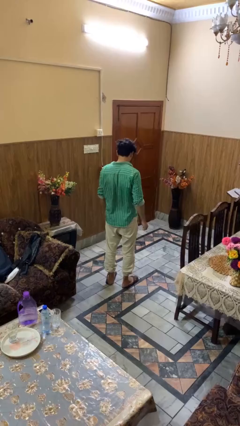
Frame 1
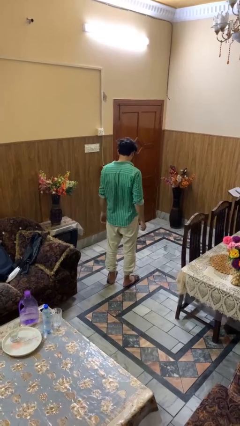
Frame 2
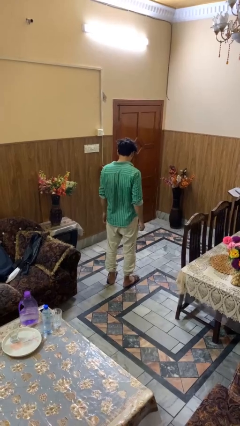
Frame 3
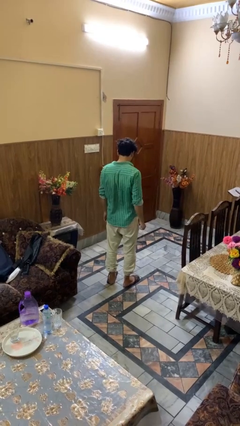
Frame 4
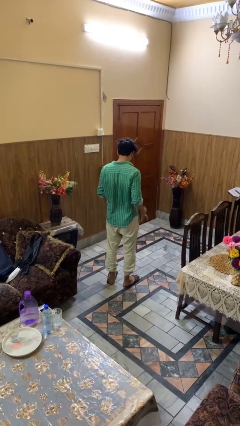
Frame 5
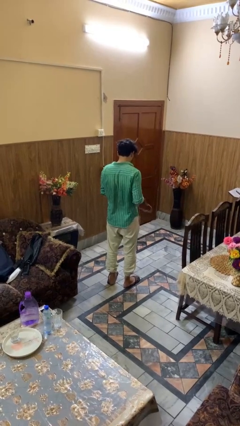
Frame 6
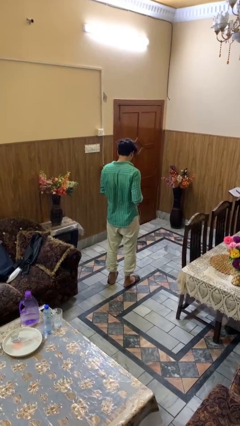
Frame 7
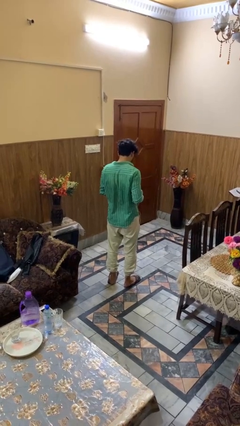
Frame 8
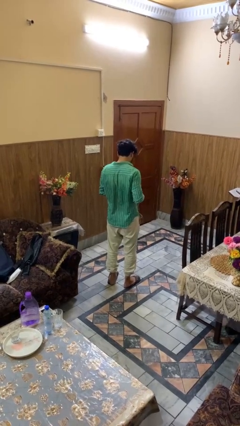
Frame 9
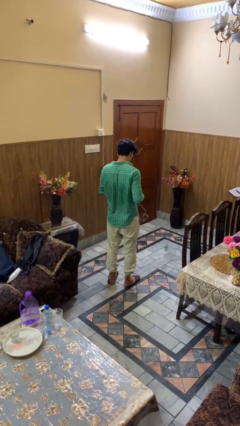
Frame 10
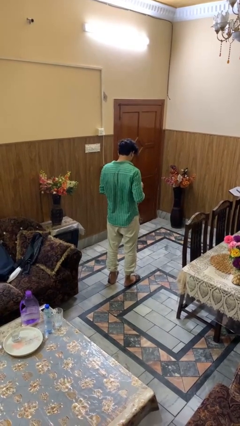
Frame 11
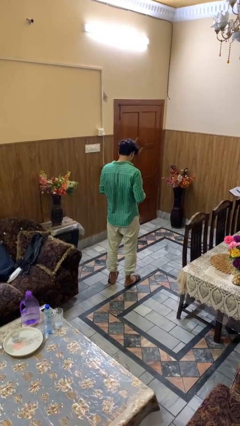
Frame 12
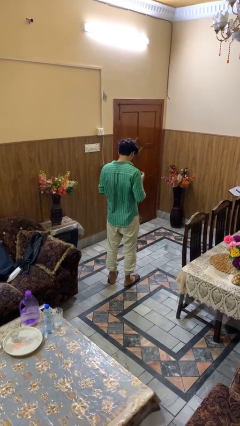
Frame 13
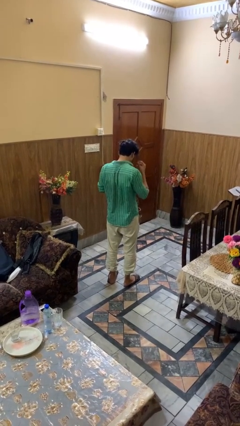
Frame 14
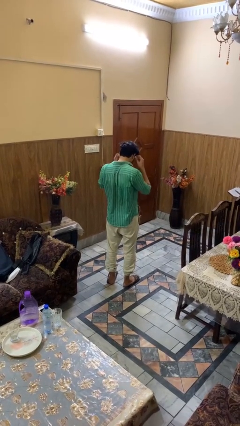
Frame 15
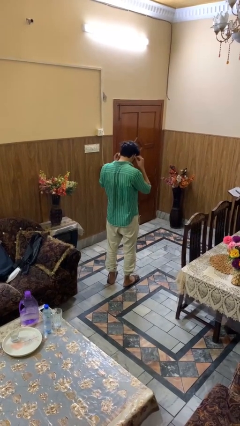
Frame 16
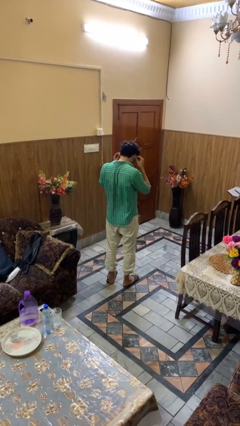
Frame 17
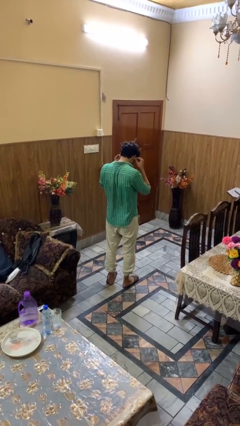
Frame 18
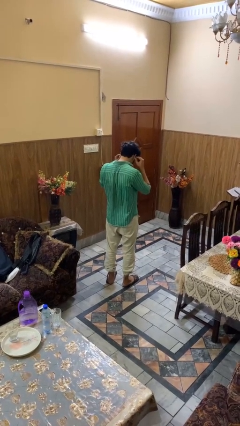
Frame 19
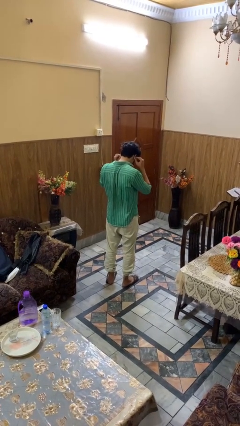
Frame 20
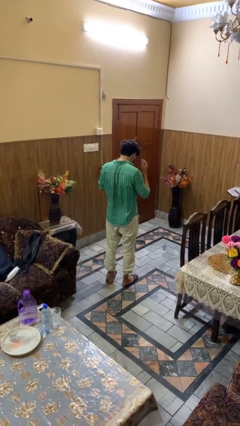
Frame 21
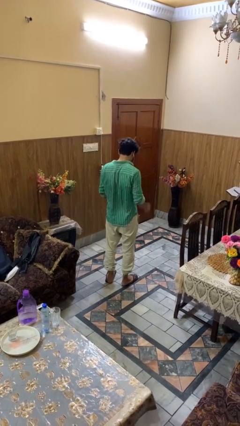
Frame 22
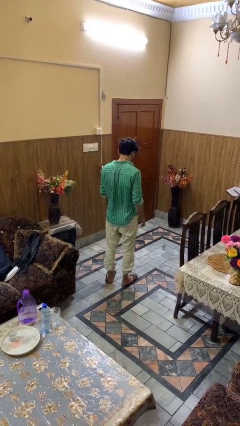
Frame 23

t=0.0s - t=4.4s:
person puts on headphones

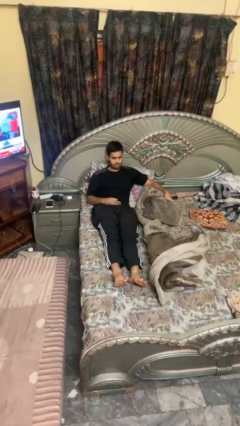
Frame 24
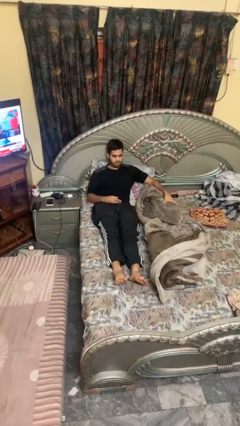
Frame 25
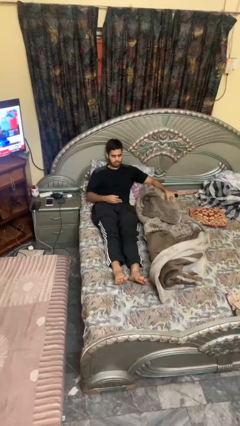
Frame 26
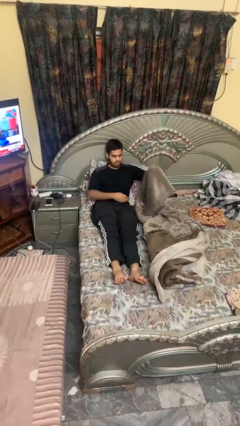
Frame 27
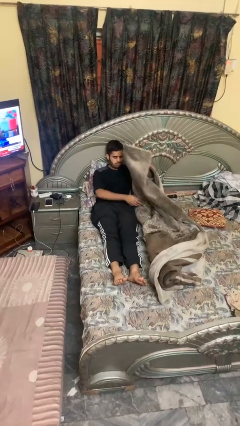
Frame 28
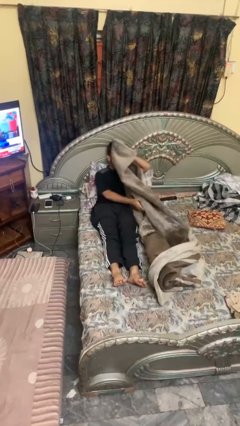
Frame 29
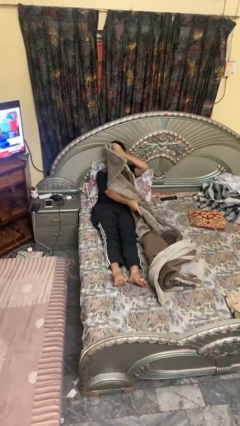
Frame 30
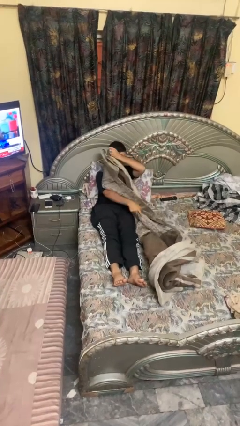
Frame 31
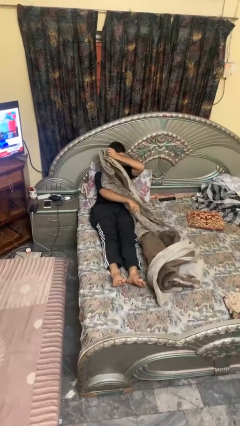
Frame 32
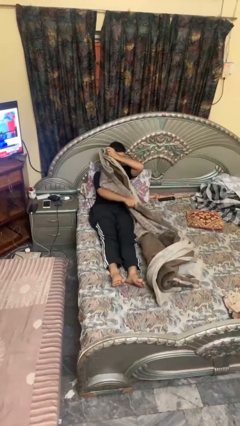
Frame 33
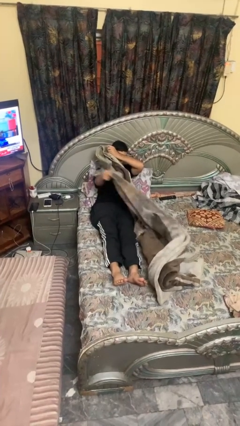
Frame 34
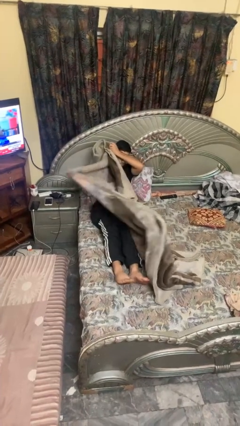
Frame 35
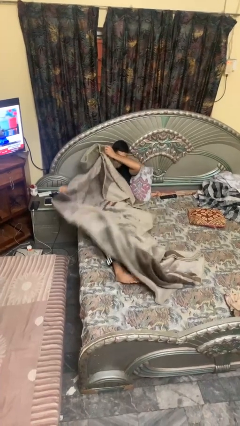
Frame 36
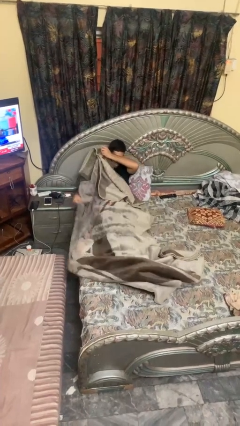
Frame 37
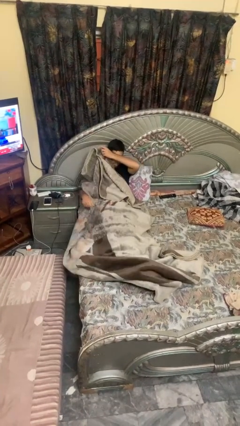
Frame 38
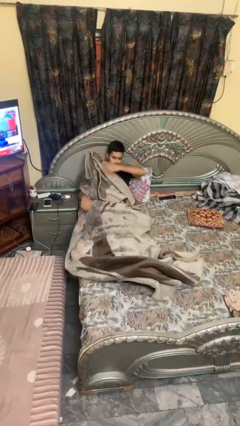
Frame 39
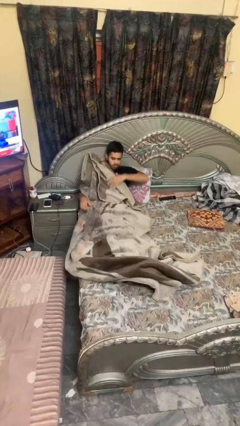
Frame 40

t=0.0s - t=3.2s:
person covers with blanket

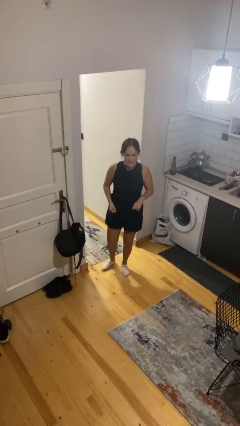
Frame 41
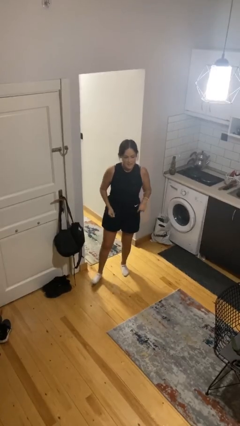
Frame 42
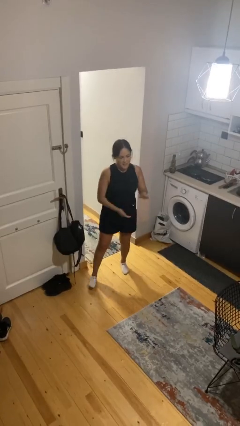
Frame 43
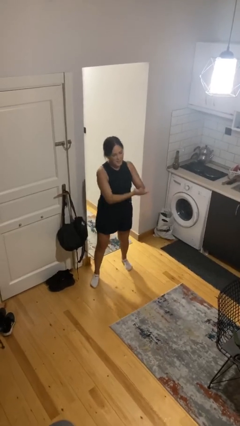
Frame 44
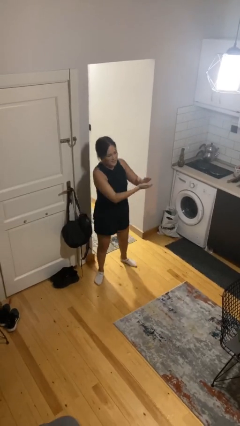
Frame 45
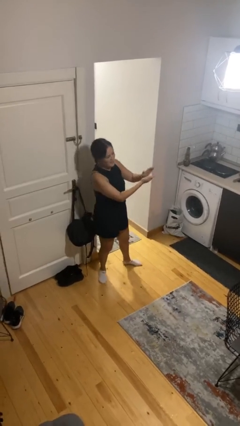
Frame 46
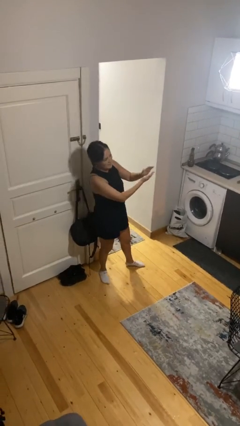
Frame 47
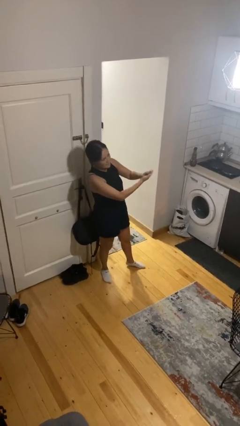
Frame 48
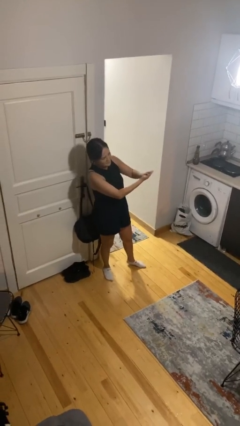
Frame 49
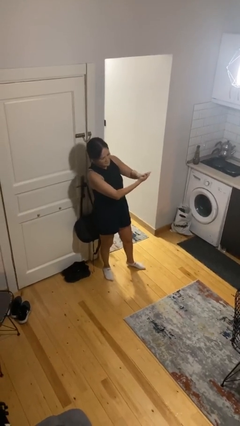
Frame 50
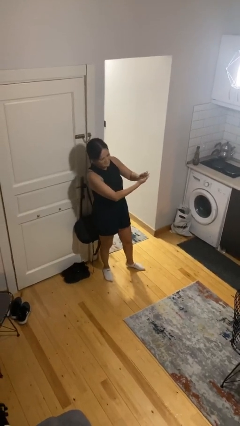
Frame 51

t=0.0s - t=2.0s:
person claps hands

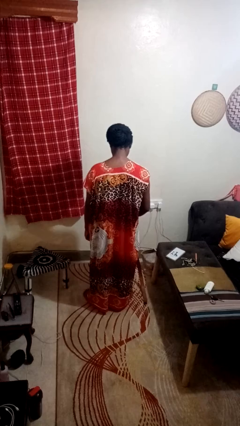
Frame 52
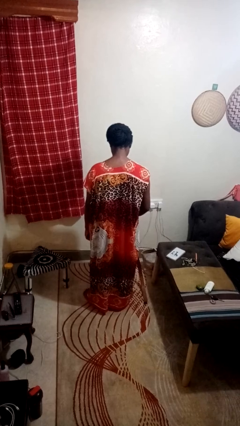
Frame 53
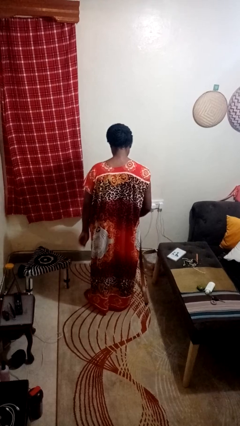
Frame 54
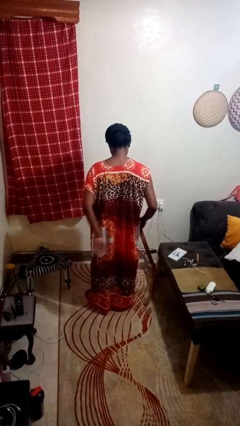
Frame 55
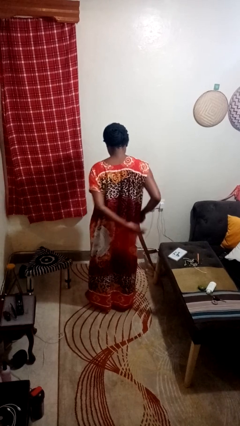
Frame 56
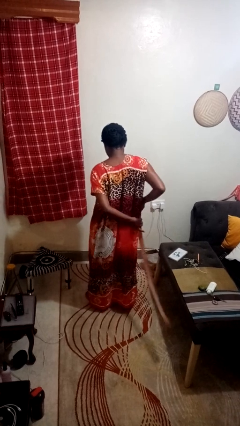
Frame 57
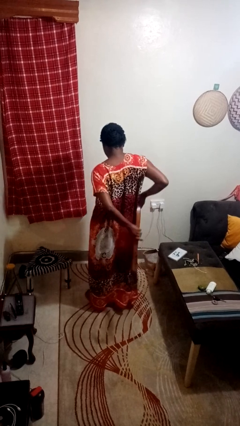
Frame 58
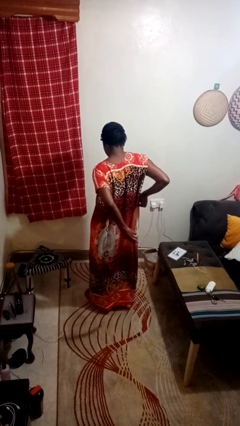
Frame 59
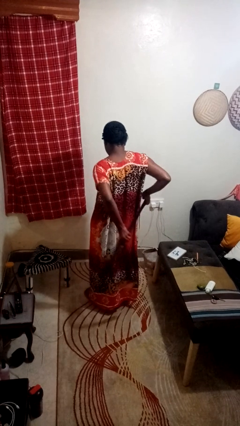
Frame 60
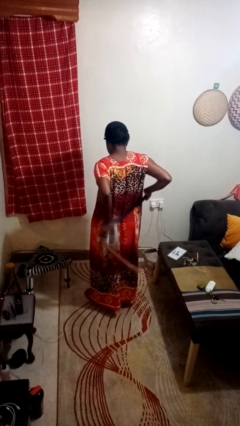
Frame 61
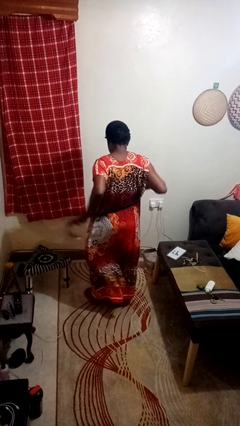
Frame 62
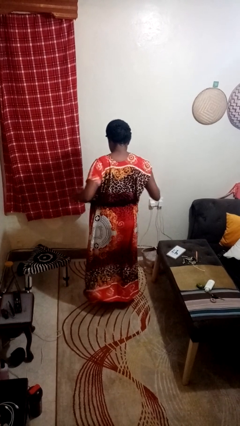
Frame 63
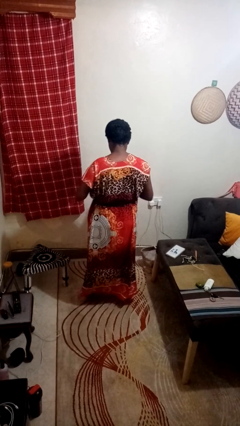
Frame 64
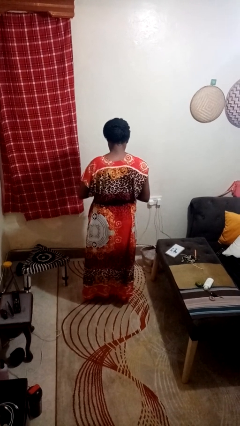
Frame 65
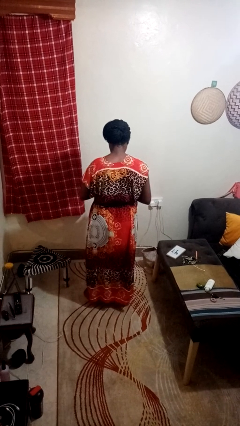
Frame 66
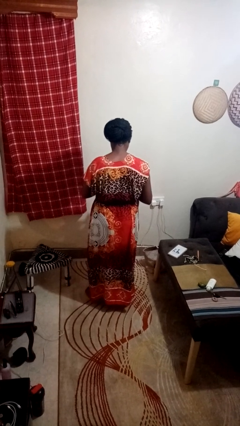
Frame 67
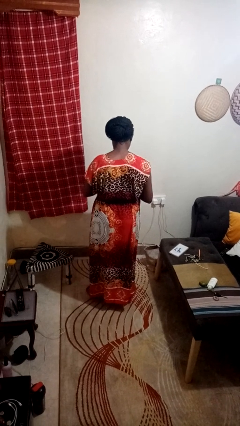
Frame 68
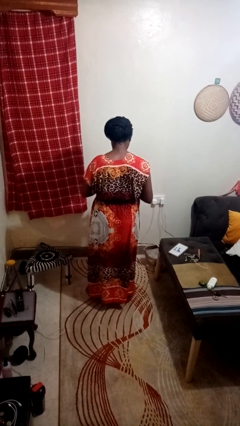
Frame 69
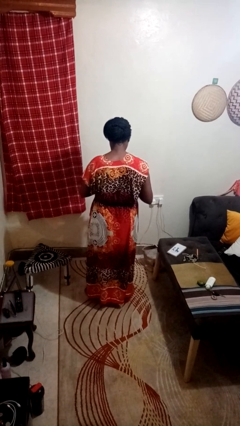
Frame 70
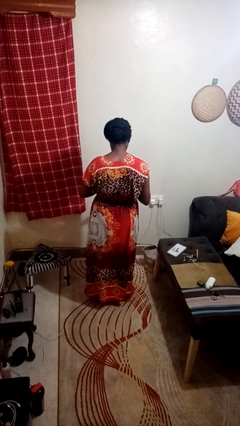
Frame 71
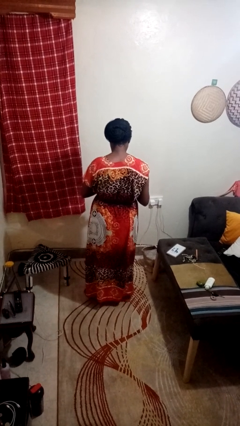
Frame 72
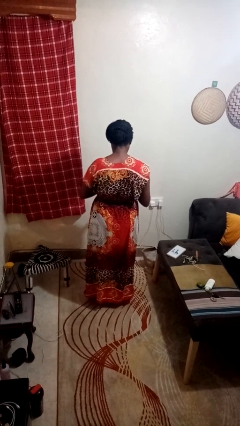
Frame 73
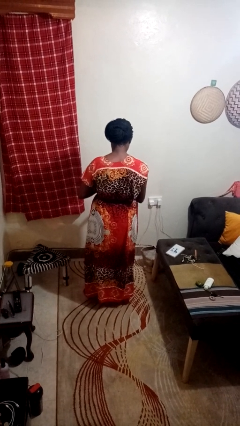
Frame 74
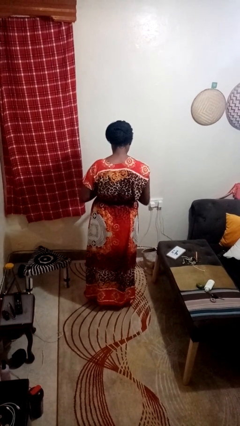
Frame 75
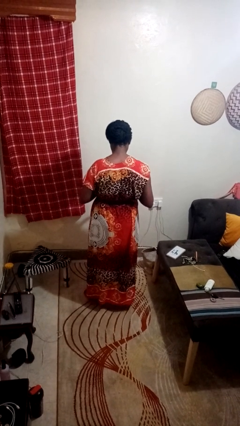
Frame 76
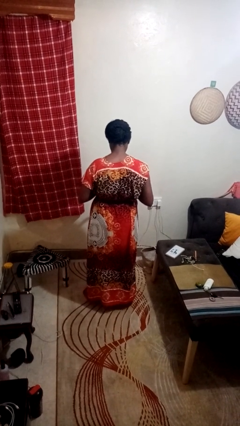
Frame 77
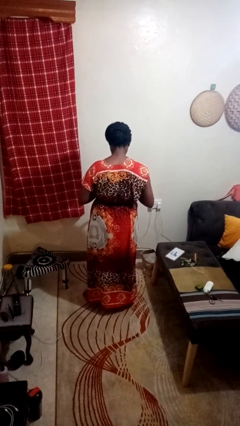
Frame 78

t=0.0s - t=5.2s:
person puts on belt

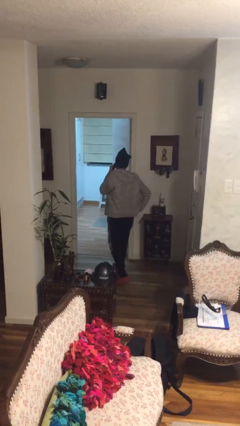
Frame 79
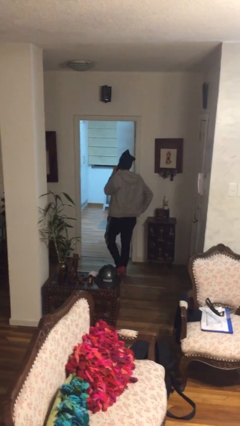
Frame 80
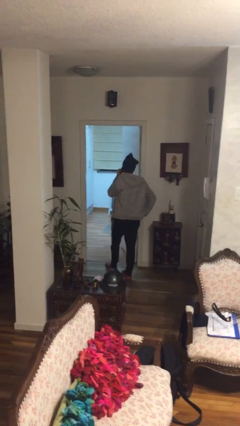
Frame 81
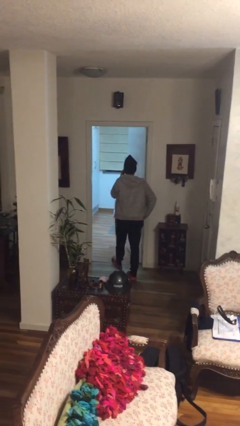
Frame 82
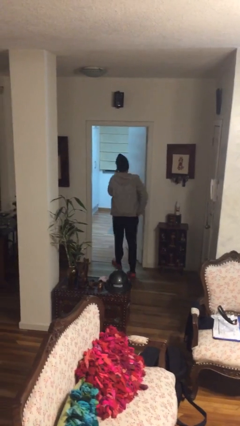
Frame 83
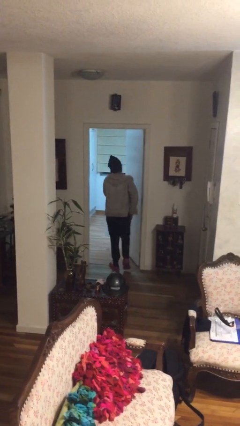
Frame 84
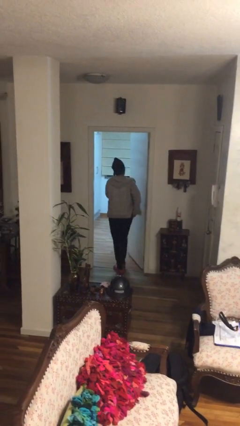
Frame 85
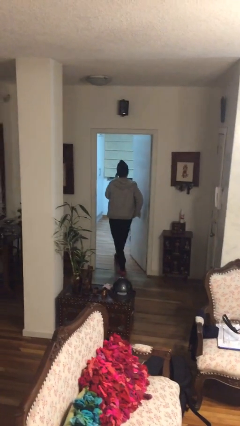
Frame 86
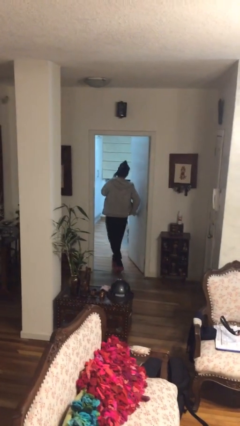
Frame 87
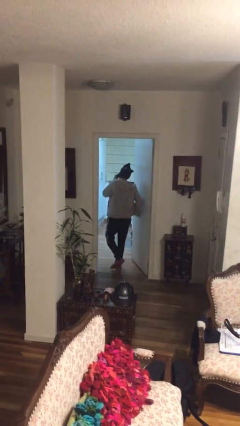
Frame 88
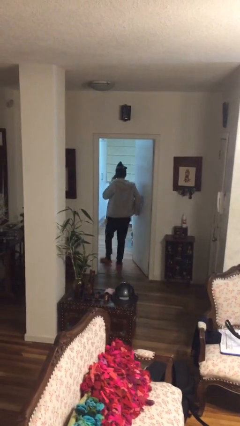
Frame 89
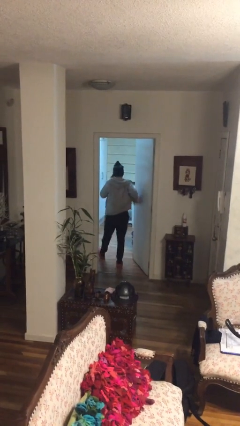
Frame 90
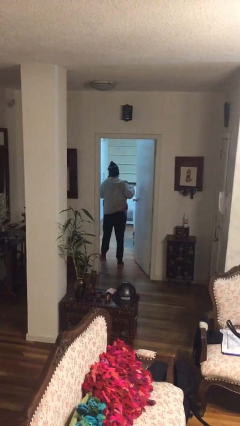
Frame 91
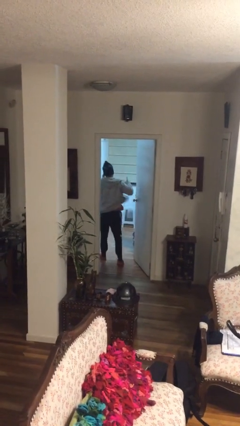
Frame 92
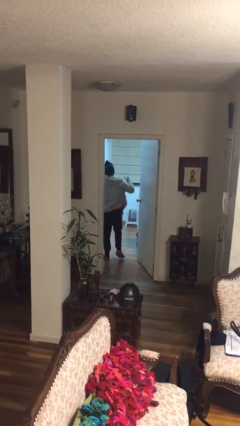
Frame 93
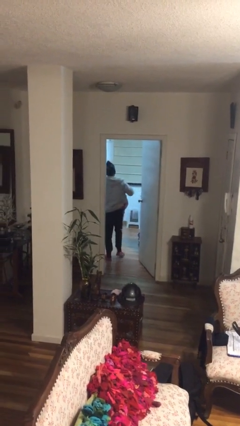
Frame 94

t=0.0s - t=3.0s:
person exits scene through structure
